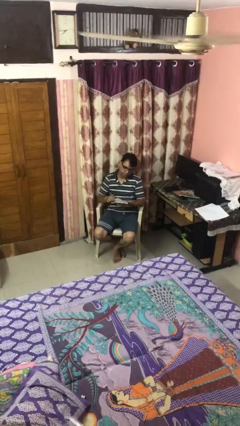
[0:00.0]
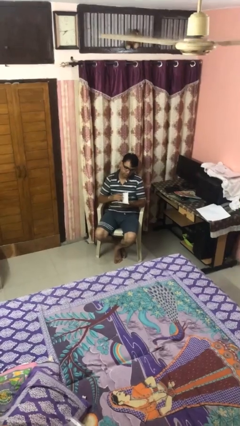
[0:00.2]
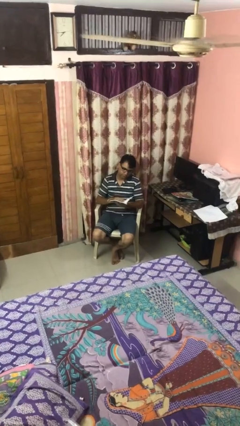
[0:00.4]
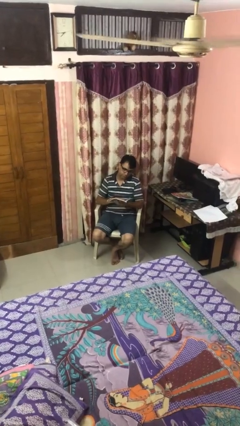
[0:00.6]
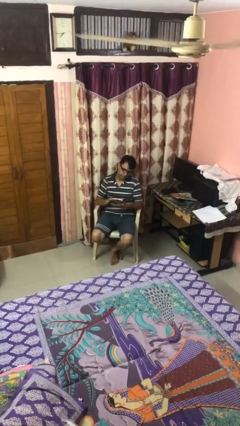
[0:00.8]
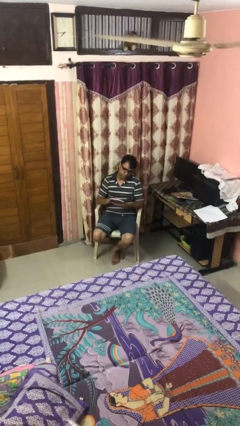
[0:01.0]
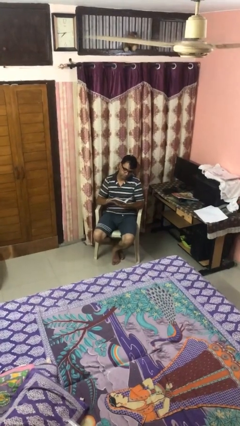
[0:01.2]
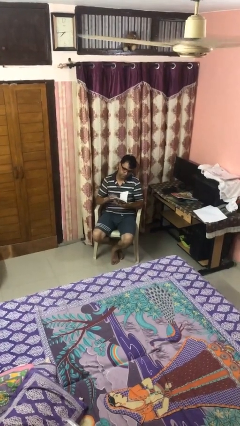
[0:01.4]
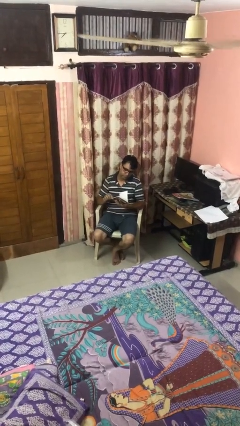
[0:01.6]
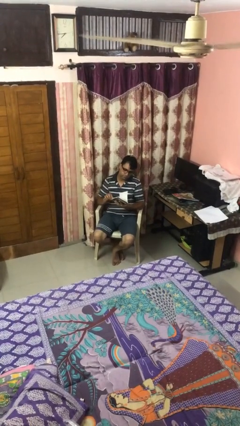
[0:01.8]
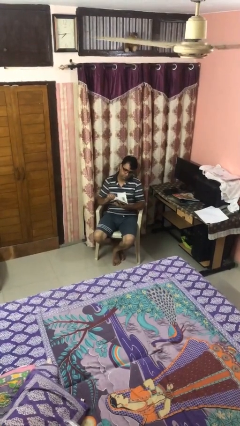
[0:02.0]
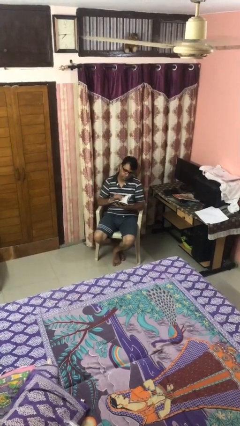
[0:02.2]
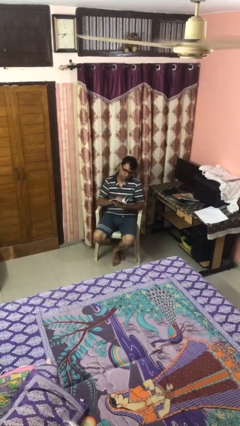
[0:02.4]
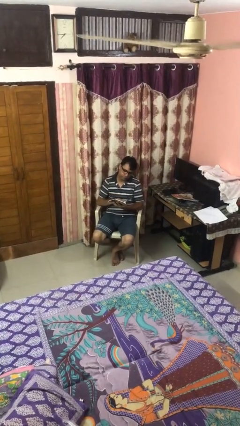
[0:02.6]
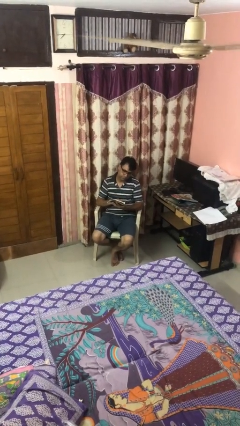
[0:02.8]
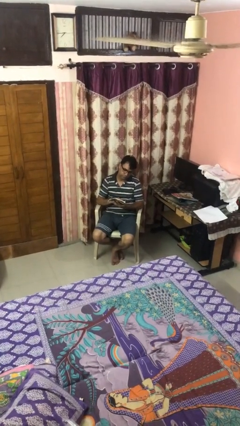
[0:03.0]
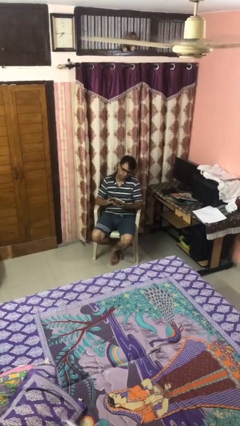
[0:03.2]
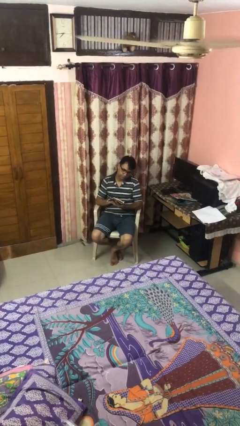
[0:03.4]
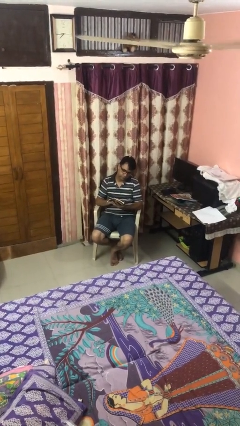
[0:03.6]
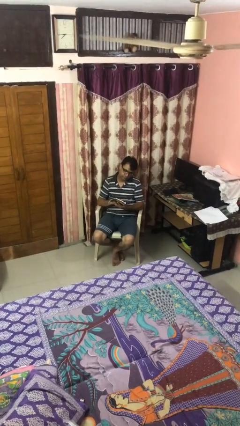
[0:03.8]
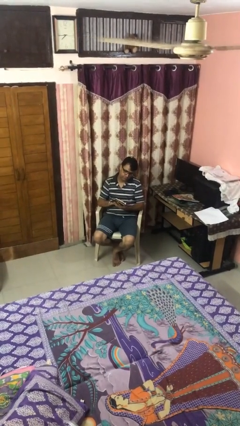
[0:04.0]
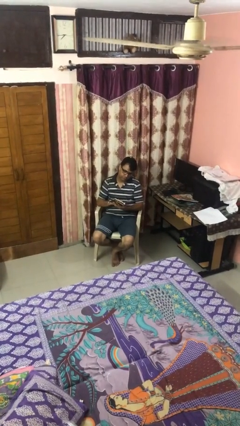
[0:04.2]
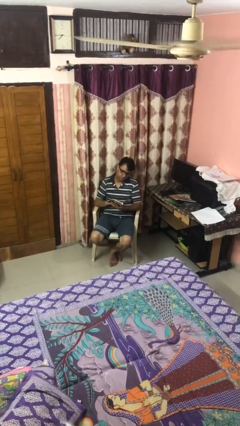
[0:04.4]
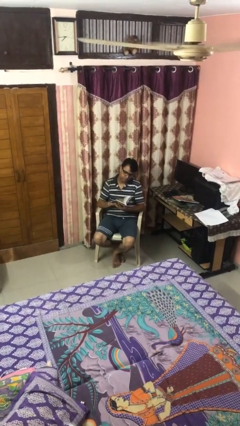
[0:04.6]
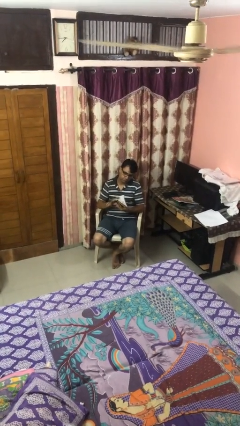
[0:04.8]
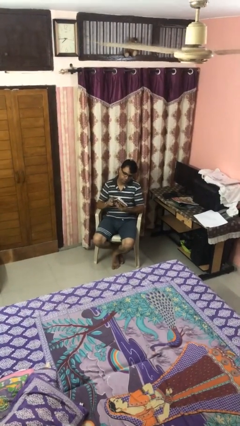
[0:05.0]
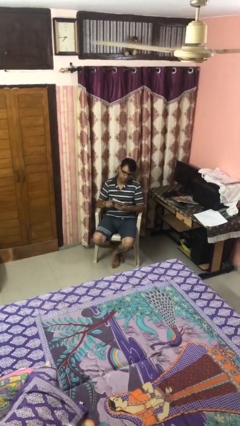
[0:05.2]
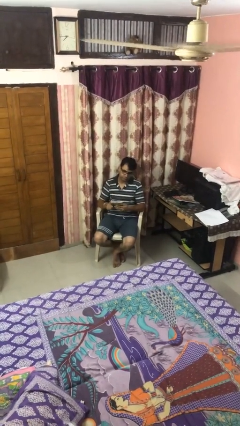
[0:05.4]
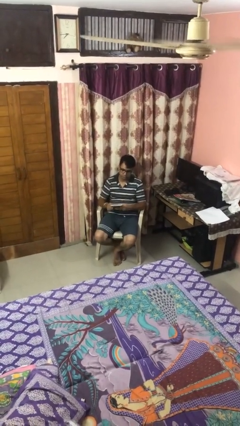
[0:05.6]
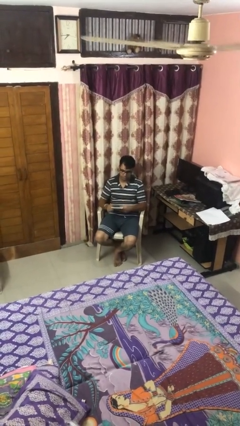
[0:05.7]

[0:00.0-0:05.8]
person reads book

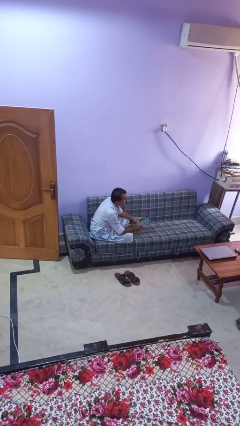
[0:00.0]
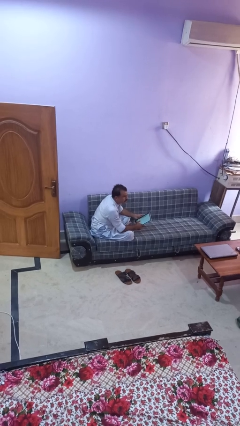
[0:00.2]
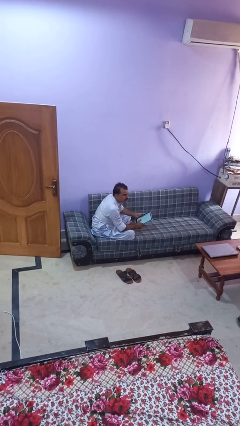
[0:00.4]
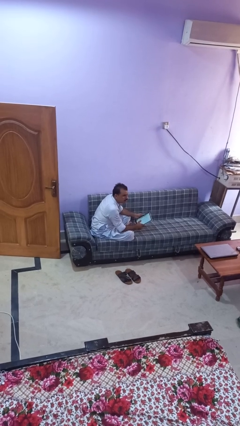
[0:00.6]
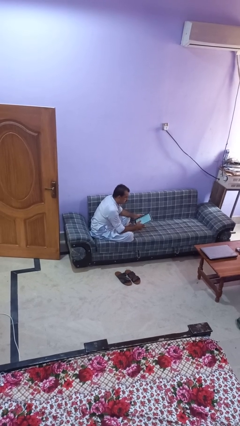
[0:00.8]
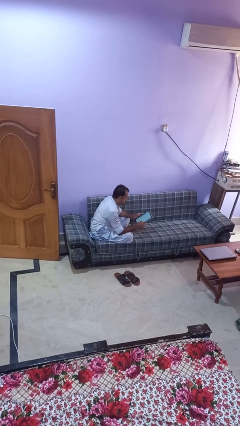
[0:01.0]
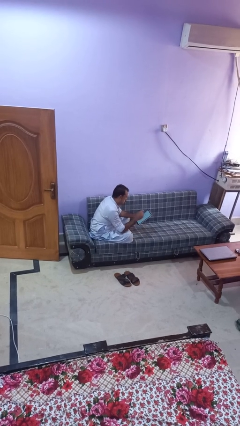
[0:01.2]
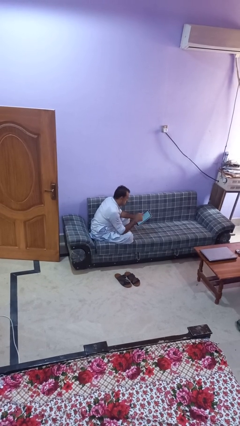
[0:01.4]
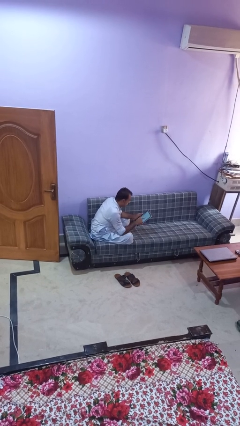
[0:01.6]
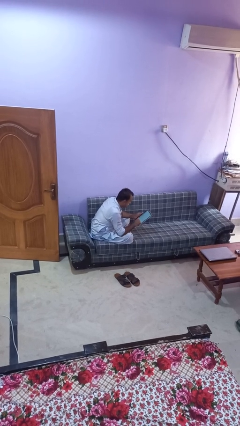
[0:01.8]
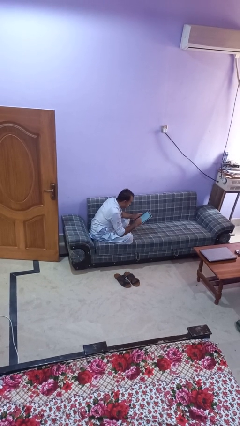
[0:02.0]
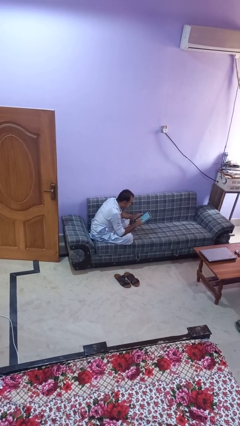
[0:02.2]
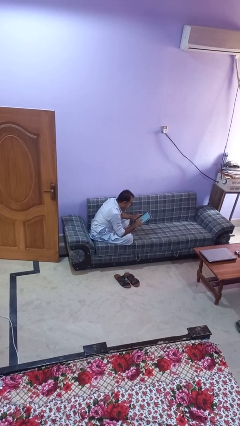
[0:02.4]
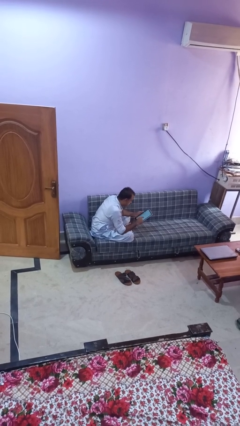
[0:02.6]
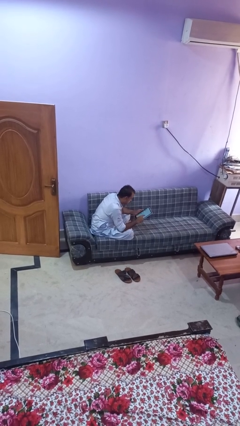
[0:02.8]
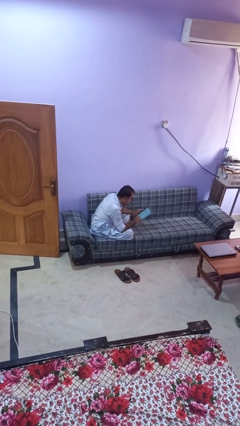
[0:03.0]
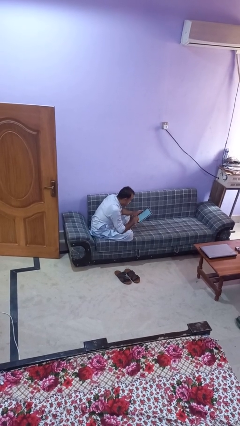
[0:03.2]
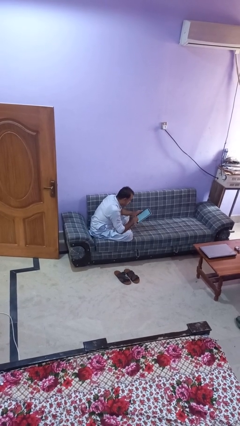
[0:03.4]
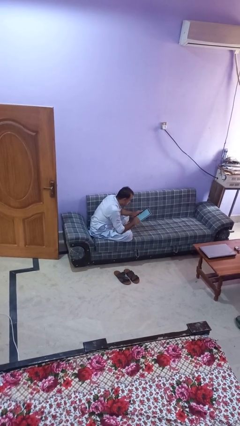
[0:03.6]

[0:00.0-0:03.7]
person interacts with tablet

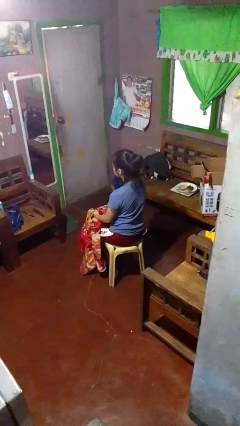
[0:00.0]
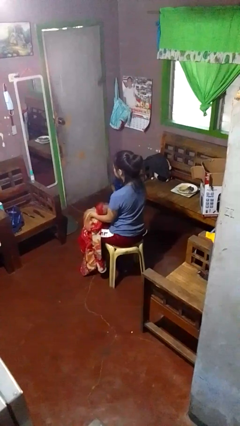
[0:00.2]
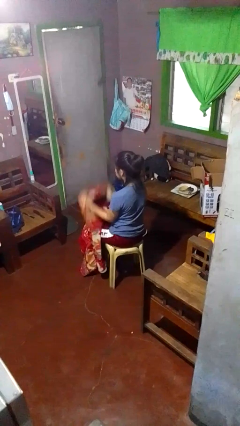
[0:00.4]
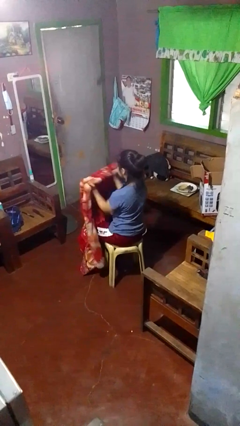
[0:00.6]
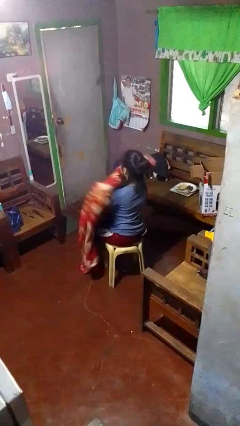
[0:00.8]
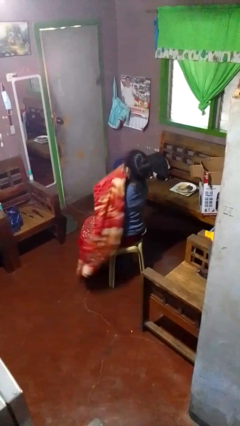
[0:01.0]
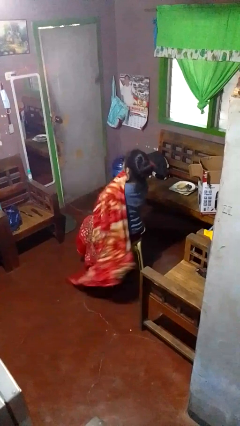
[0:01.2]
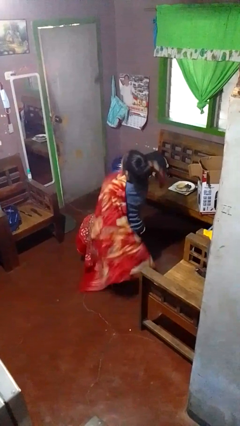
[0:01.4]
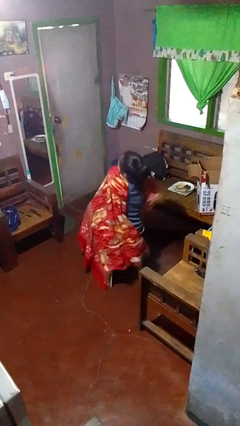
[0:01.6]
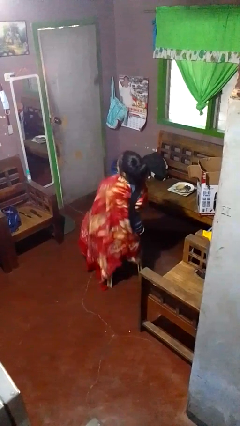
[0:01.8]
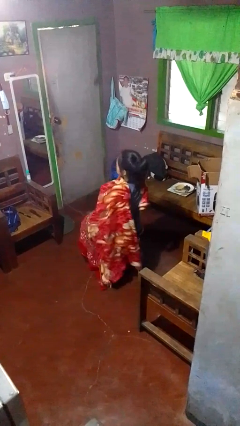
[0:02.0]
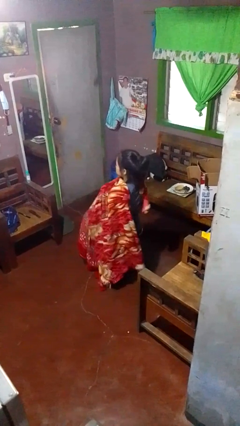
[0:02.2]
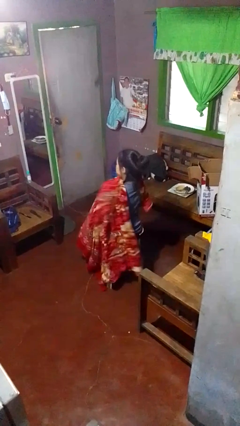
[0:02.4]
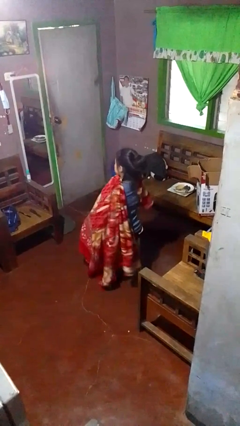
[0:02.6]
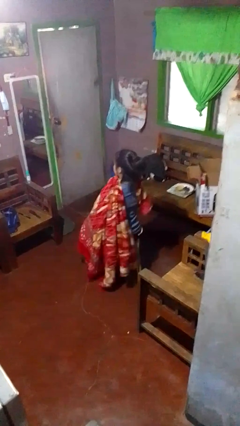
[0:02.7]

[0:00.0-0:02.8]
person covers with blanket

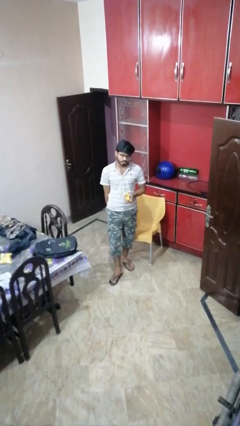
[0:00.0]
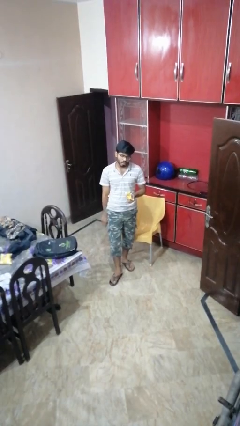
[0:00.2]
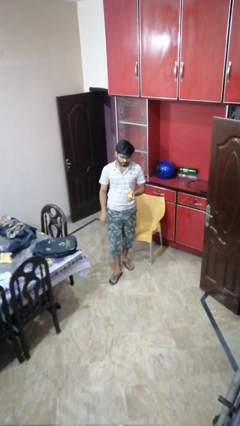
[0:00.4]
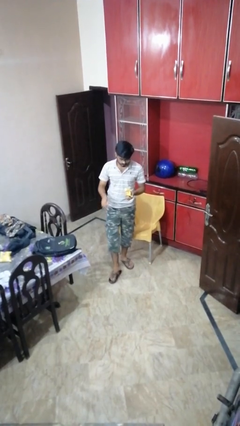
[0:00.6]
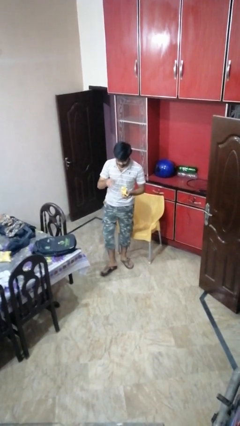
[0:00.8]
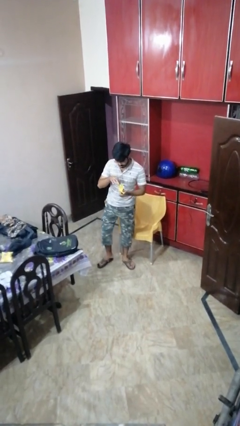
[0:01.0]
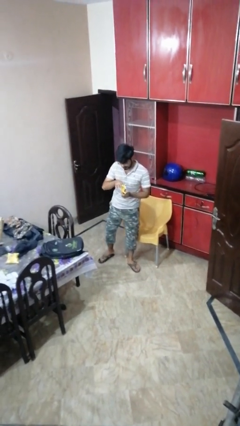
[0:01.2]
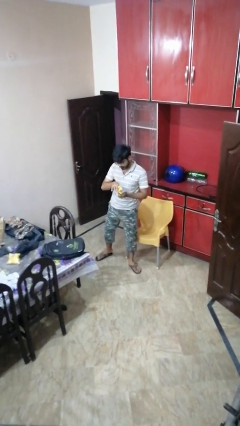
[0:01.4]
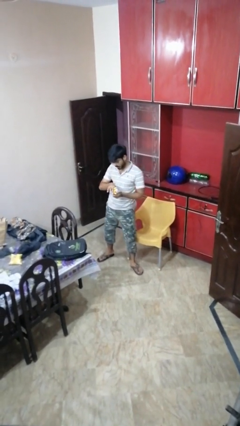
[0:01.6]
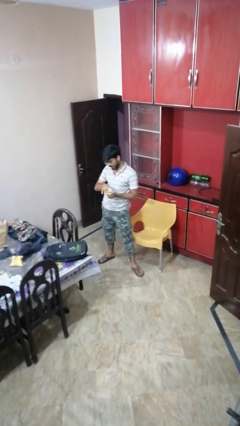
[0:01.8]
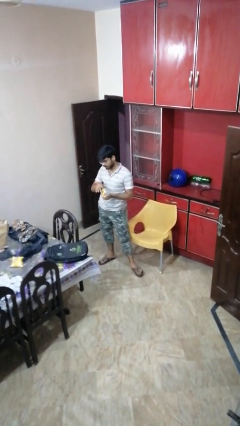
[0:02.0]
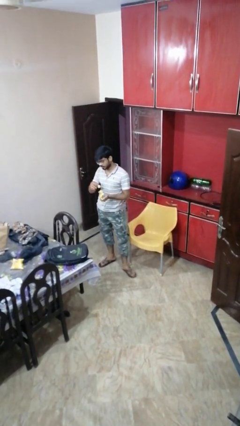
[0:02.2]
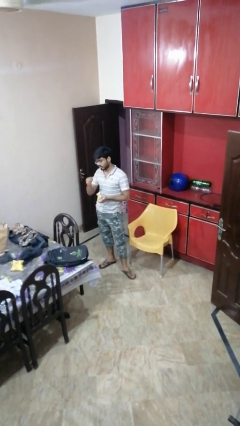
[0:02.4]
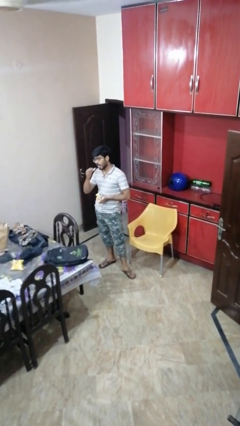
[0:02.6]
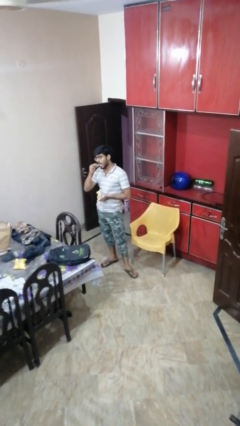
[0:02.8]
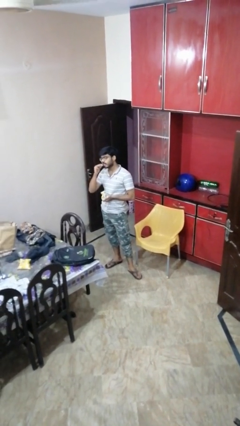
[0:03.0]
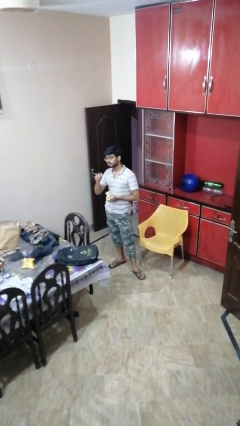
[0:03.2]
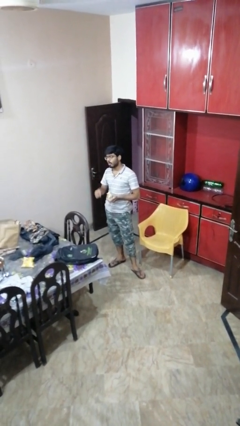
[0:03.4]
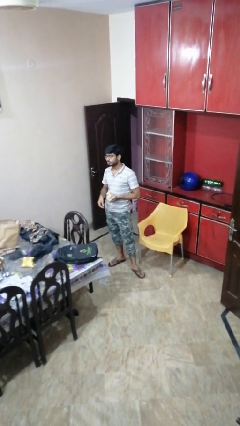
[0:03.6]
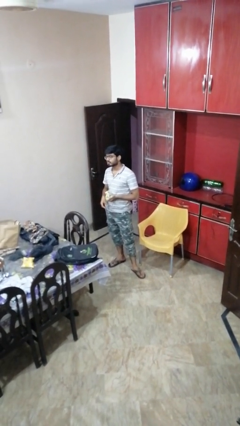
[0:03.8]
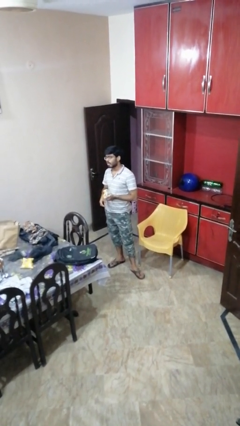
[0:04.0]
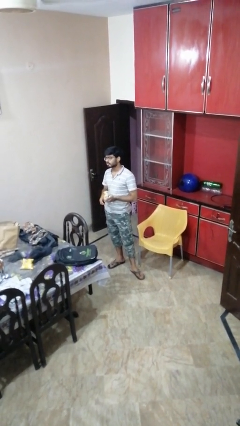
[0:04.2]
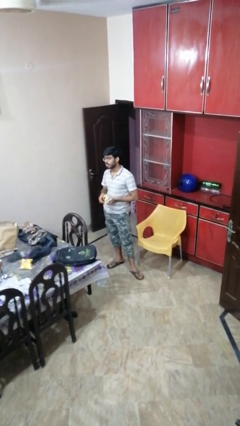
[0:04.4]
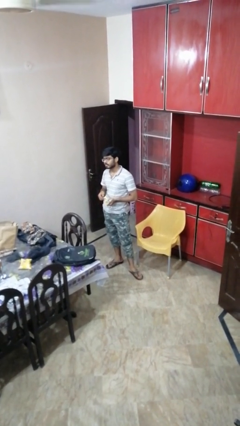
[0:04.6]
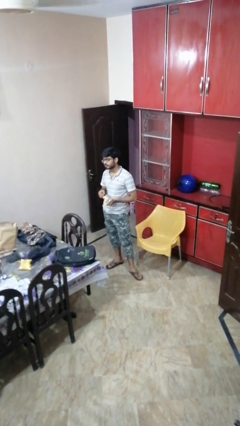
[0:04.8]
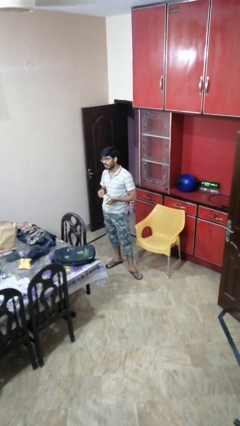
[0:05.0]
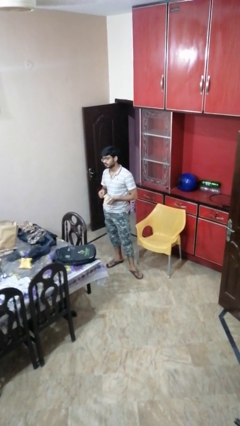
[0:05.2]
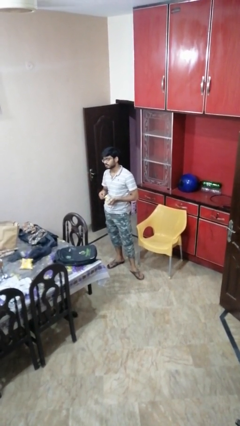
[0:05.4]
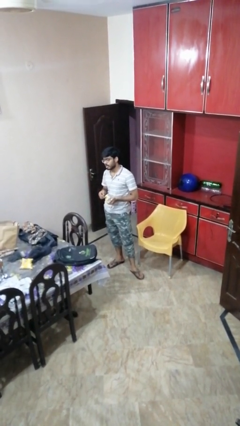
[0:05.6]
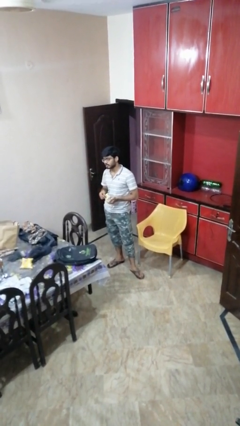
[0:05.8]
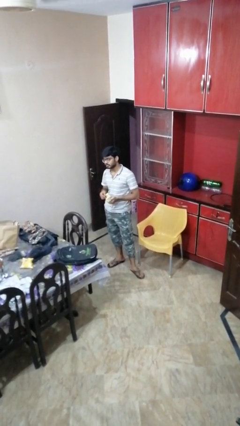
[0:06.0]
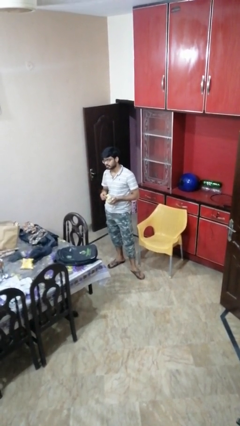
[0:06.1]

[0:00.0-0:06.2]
person eats snack from bag
